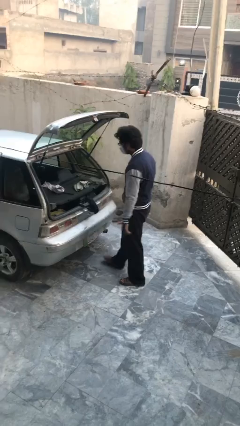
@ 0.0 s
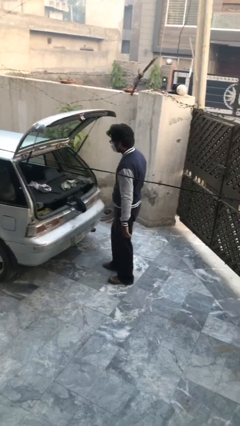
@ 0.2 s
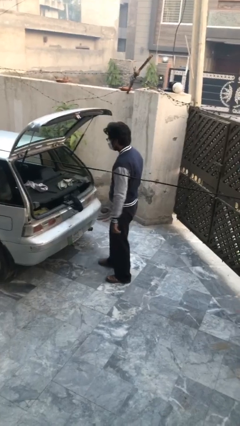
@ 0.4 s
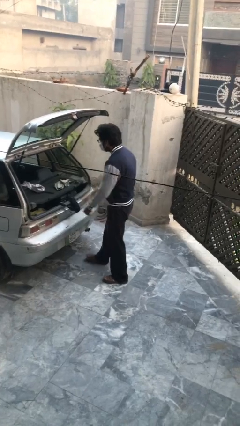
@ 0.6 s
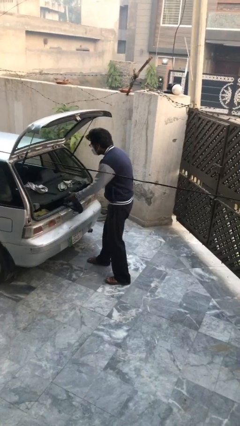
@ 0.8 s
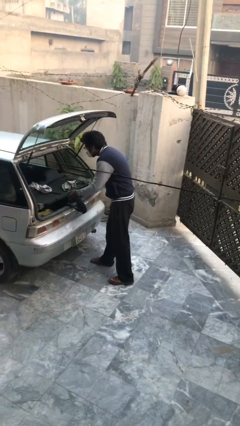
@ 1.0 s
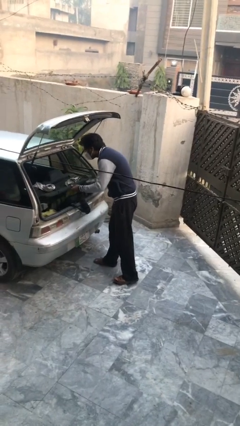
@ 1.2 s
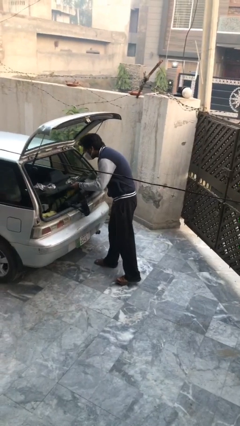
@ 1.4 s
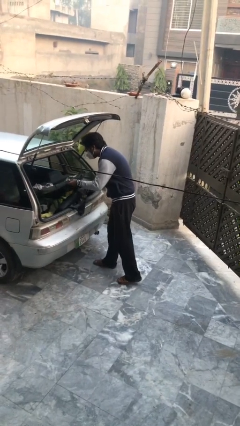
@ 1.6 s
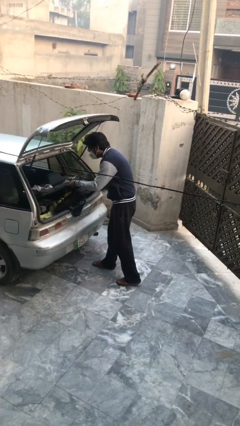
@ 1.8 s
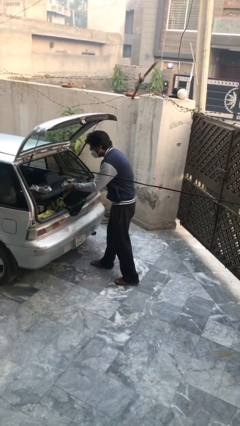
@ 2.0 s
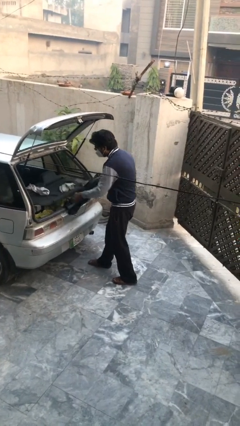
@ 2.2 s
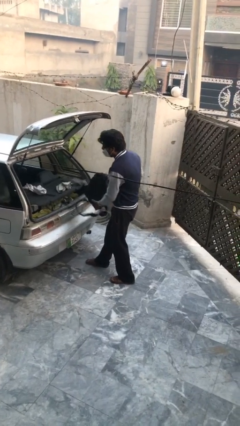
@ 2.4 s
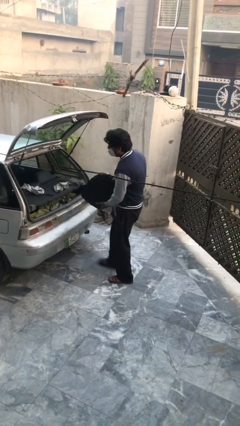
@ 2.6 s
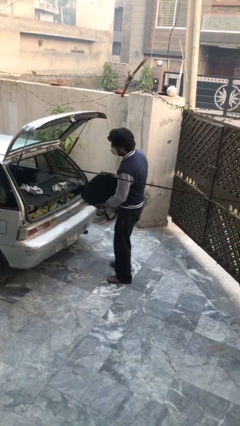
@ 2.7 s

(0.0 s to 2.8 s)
person unloads car

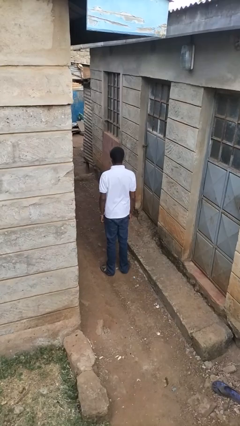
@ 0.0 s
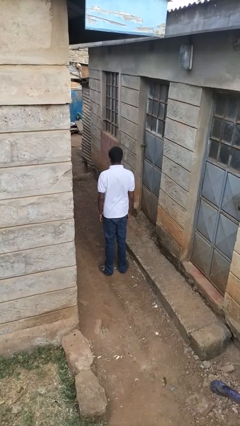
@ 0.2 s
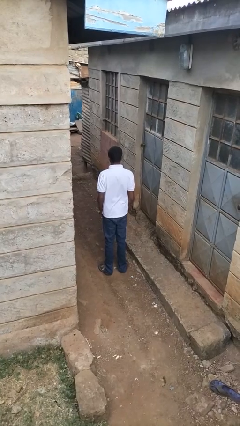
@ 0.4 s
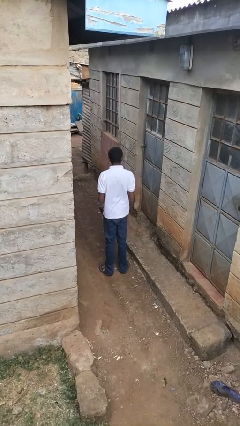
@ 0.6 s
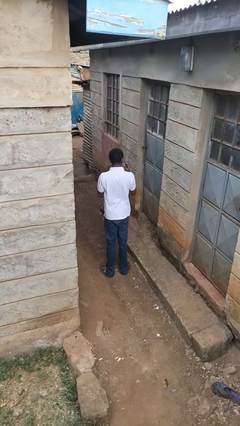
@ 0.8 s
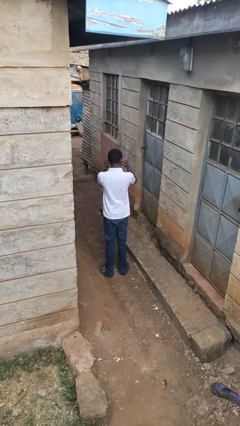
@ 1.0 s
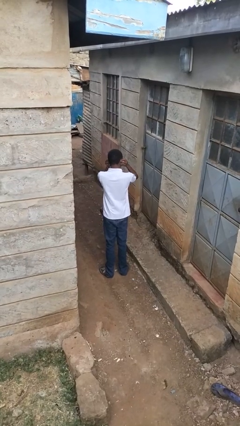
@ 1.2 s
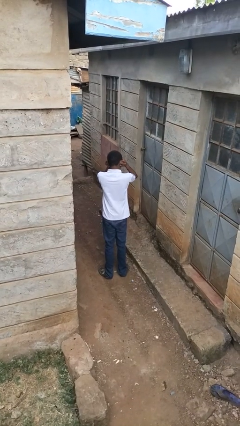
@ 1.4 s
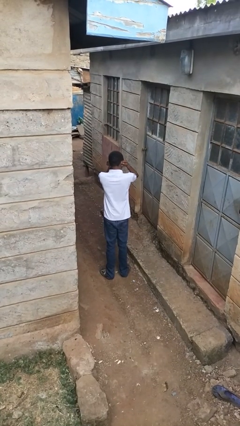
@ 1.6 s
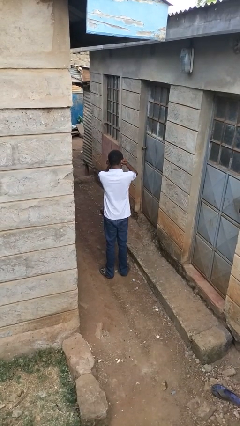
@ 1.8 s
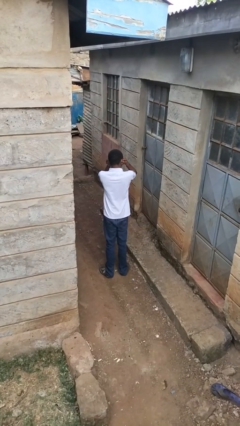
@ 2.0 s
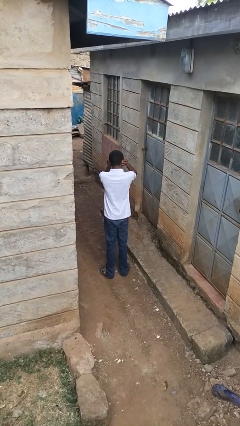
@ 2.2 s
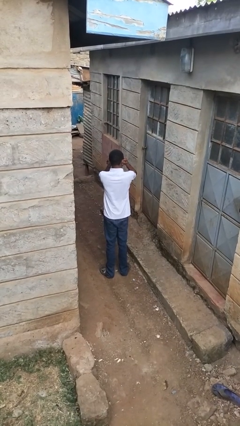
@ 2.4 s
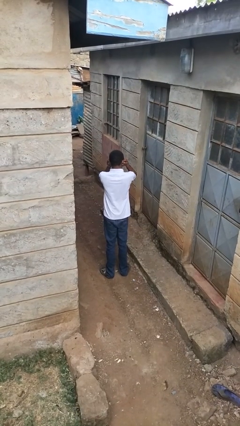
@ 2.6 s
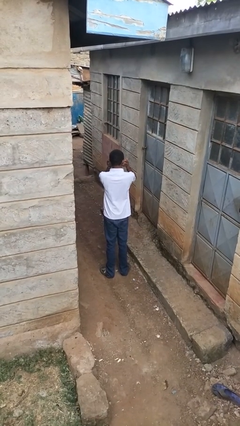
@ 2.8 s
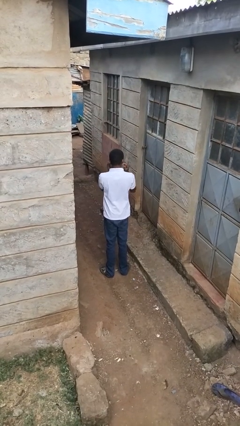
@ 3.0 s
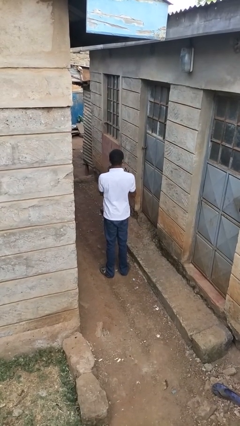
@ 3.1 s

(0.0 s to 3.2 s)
person puts fingers in ear

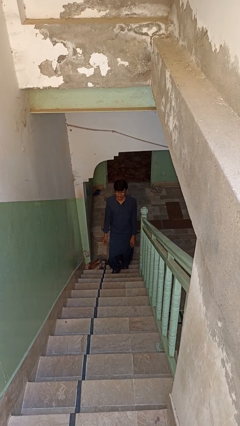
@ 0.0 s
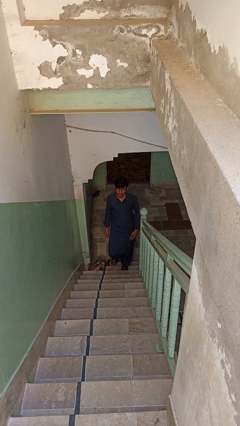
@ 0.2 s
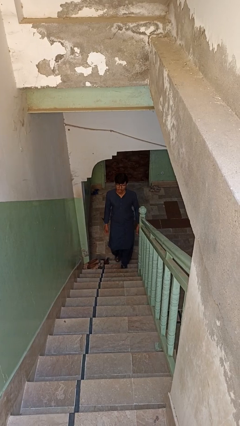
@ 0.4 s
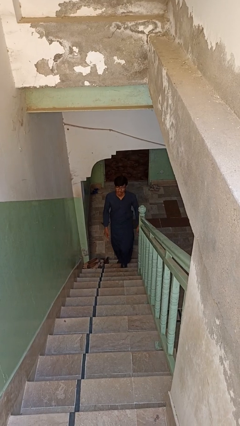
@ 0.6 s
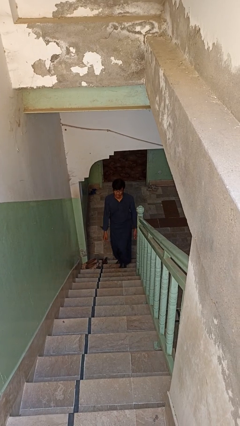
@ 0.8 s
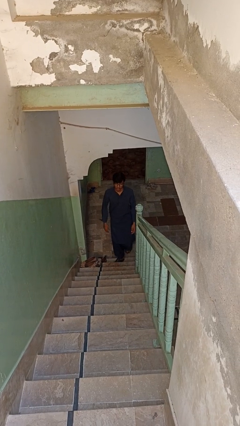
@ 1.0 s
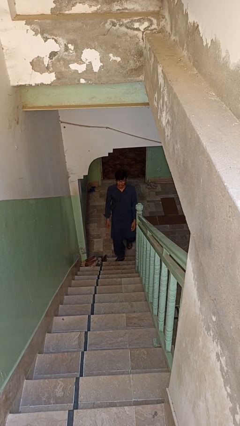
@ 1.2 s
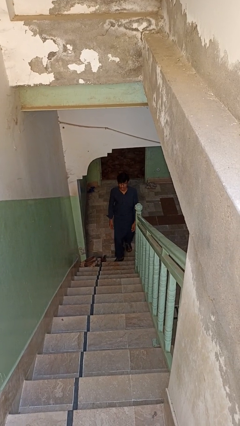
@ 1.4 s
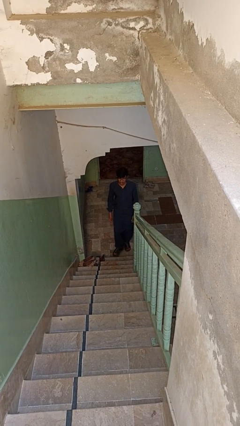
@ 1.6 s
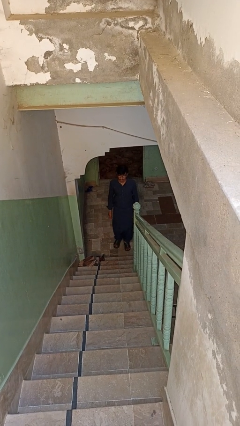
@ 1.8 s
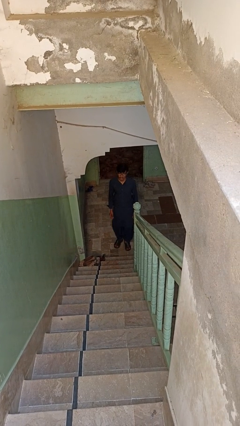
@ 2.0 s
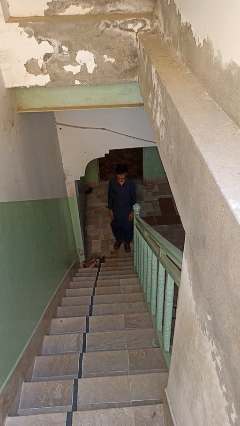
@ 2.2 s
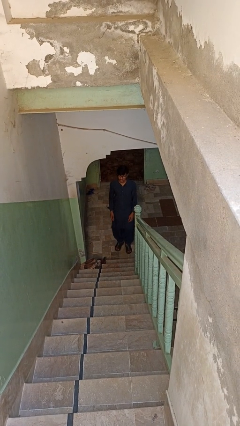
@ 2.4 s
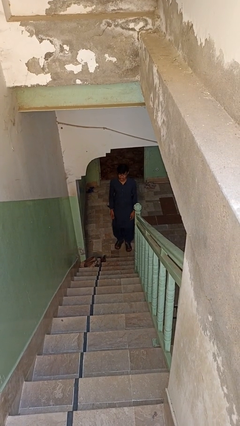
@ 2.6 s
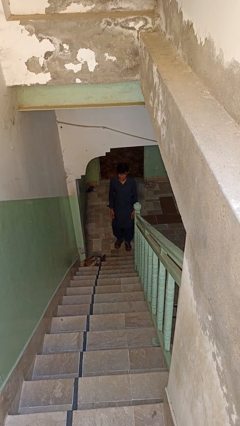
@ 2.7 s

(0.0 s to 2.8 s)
person climbs down stairs

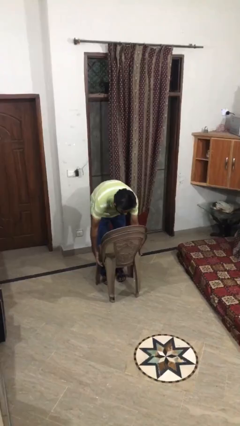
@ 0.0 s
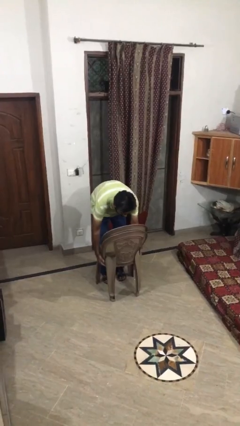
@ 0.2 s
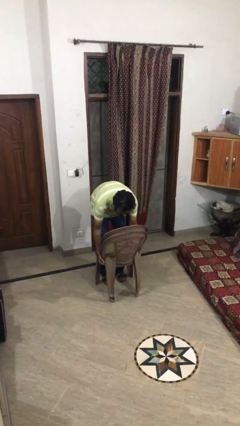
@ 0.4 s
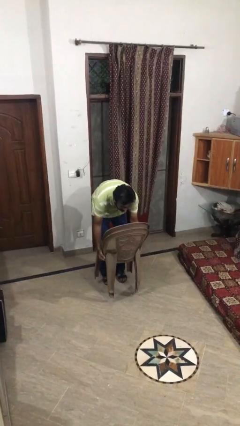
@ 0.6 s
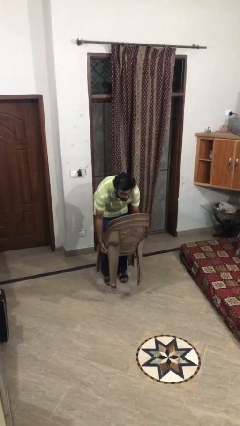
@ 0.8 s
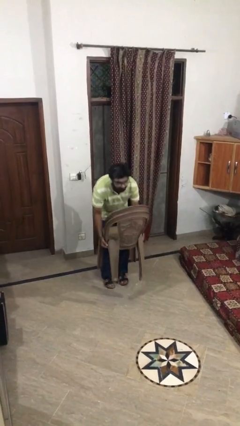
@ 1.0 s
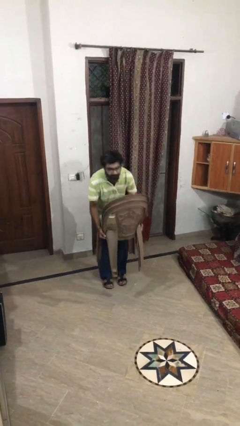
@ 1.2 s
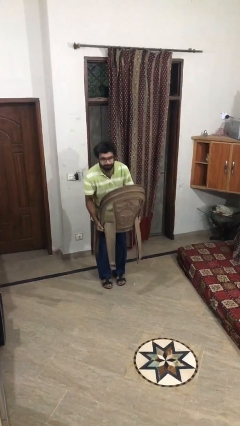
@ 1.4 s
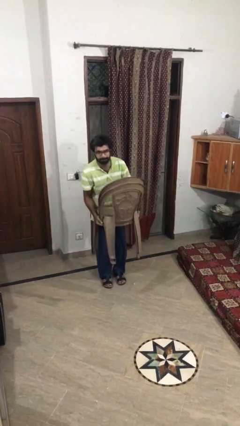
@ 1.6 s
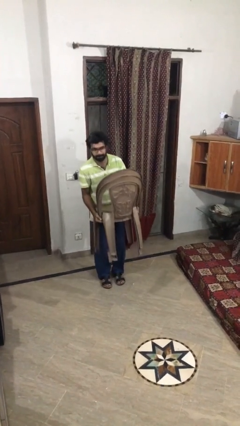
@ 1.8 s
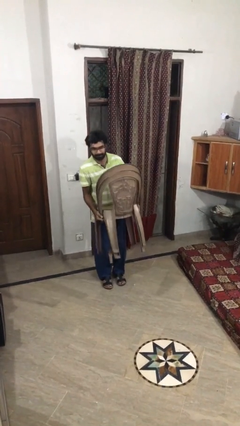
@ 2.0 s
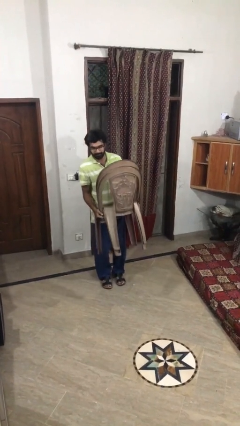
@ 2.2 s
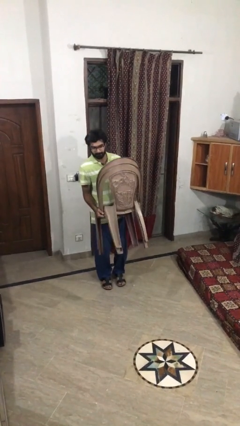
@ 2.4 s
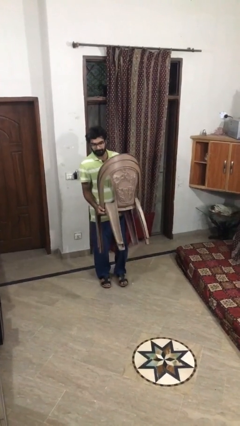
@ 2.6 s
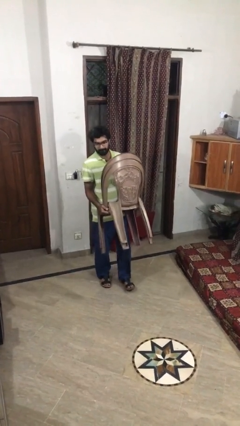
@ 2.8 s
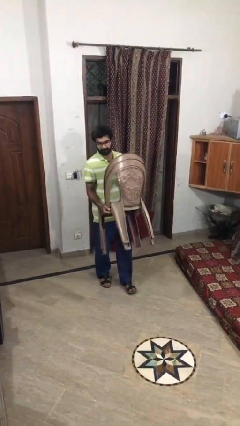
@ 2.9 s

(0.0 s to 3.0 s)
person picks up object from floor

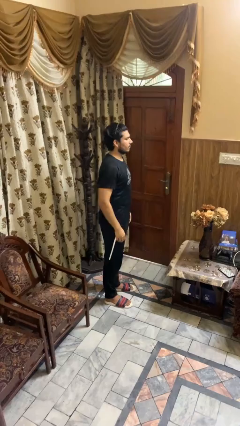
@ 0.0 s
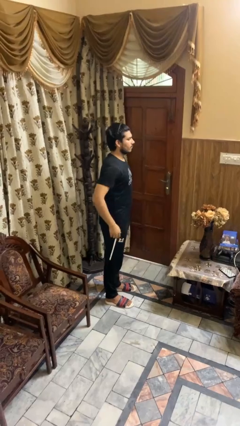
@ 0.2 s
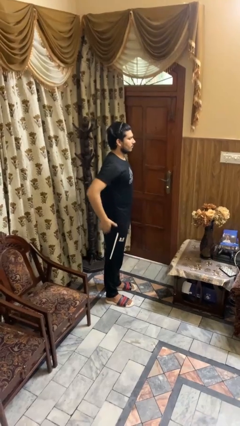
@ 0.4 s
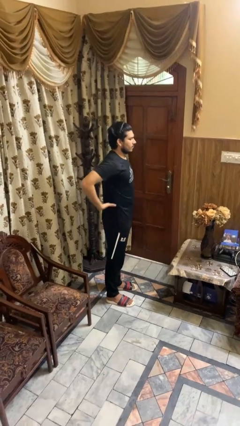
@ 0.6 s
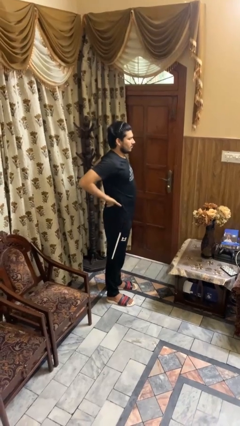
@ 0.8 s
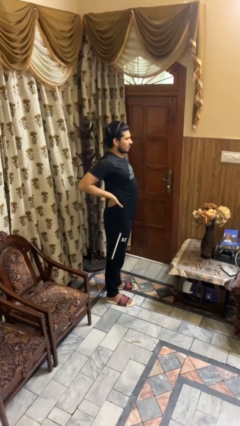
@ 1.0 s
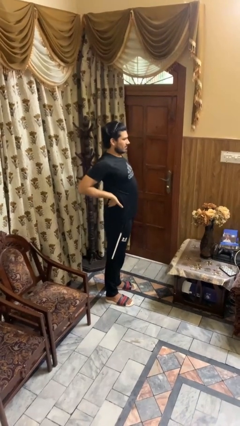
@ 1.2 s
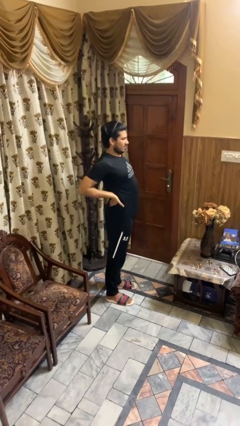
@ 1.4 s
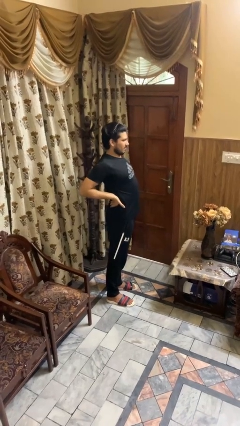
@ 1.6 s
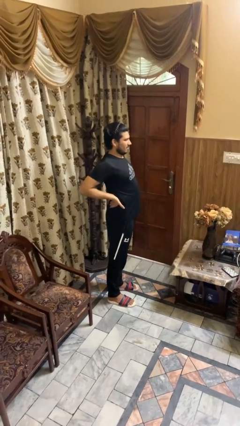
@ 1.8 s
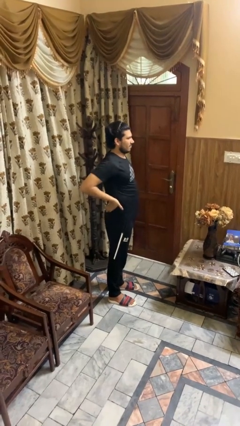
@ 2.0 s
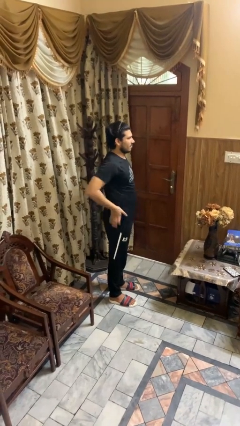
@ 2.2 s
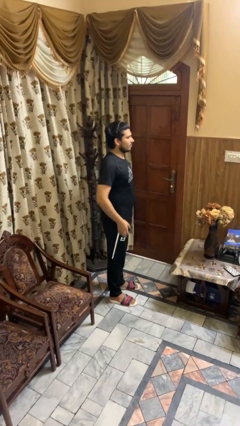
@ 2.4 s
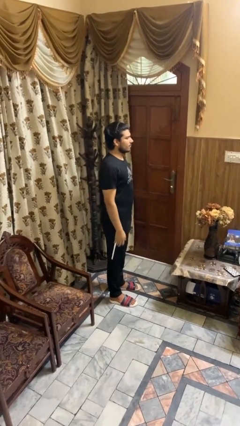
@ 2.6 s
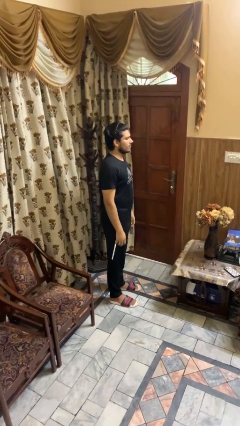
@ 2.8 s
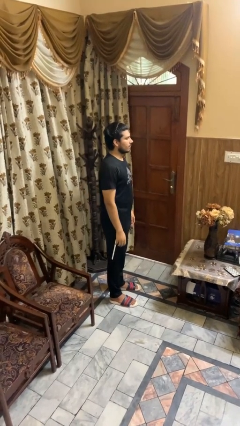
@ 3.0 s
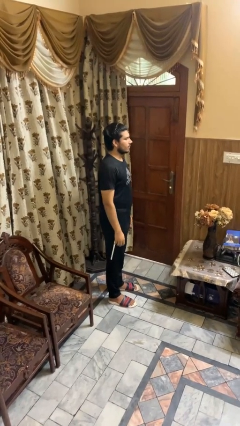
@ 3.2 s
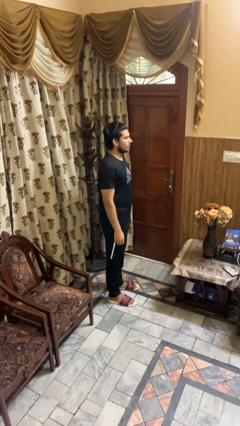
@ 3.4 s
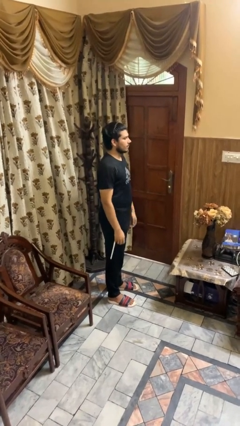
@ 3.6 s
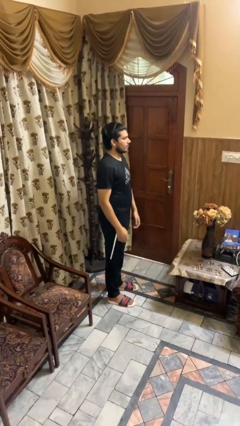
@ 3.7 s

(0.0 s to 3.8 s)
person stretches back

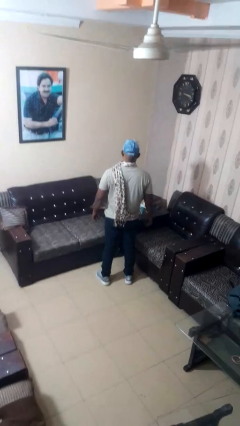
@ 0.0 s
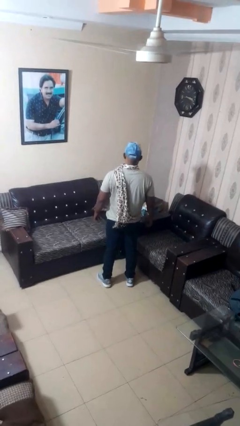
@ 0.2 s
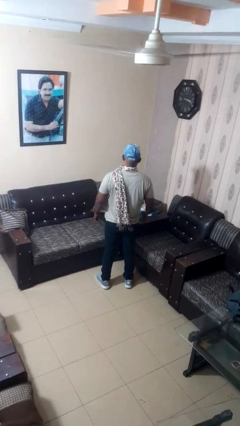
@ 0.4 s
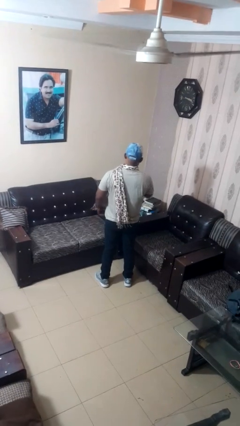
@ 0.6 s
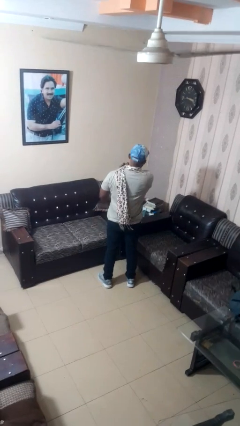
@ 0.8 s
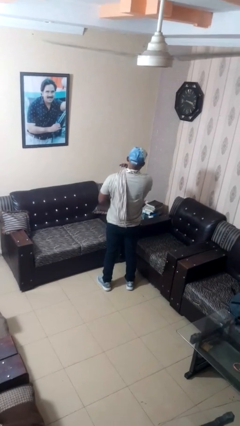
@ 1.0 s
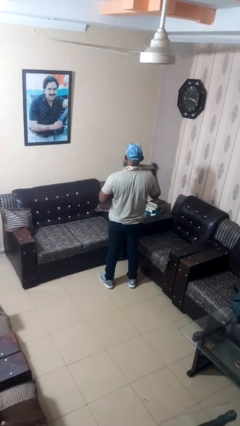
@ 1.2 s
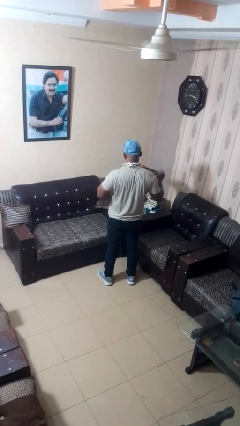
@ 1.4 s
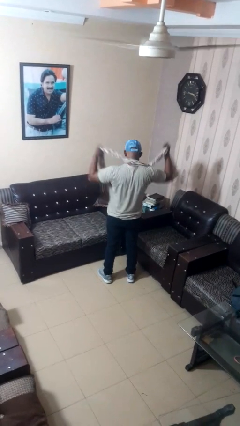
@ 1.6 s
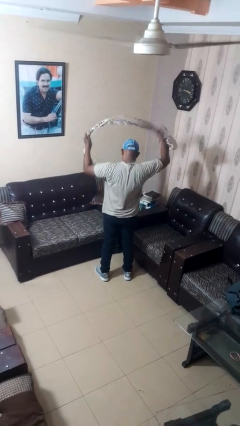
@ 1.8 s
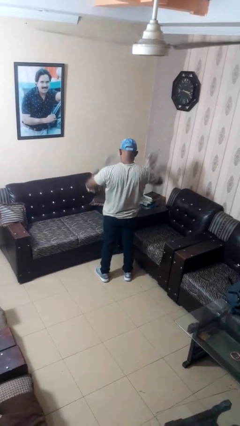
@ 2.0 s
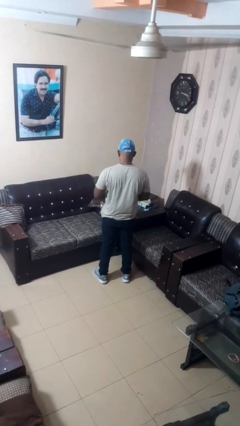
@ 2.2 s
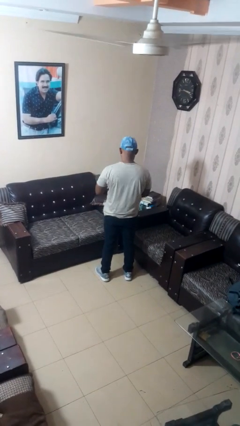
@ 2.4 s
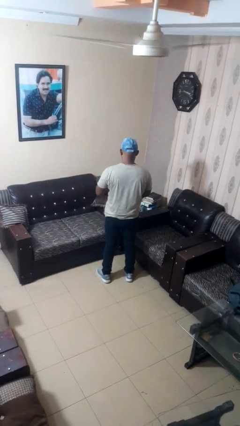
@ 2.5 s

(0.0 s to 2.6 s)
person takes off scarf
